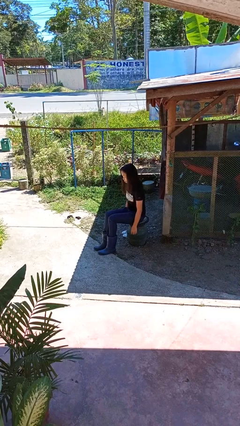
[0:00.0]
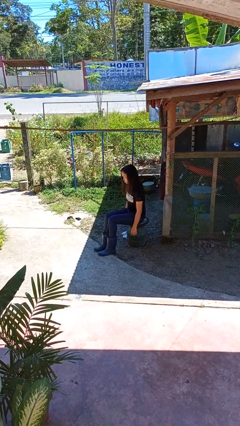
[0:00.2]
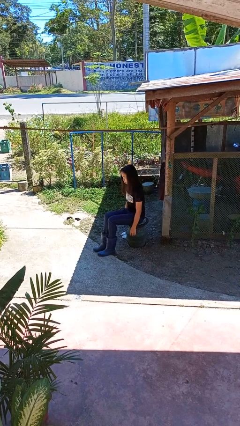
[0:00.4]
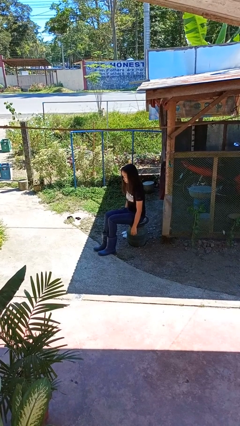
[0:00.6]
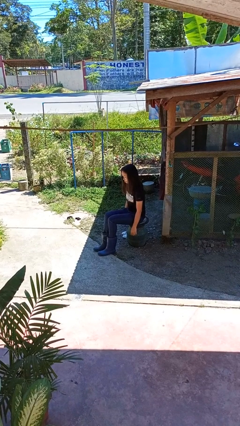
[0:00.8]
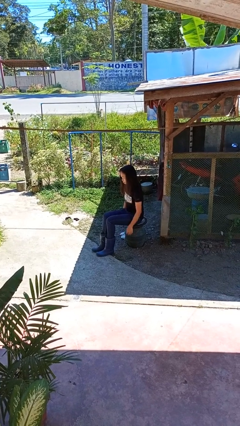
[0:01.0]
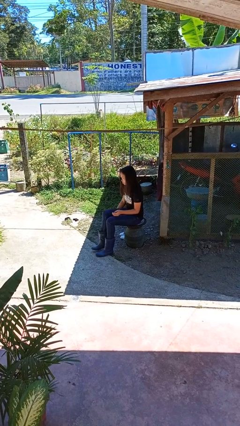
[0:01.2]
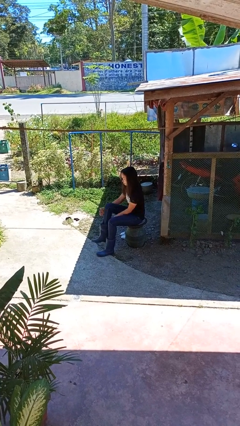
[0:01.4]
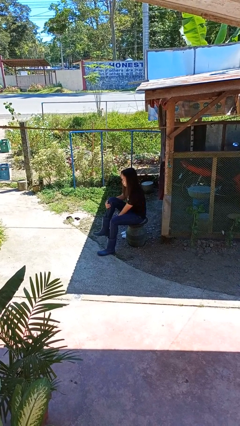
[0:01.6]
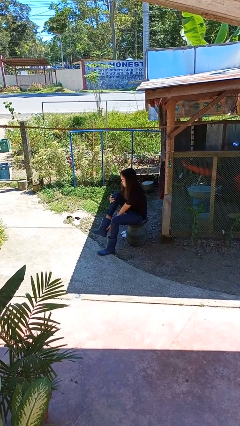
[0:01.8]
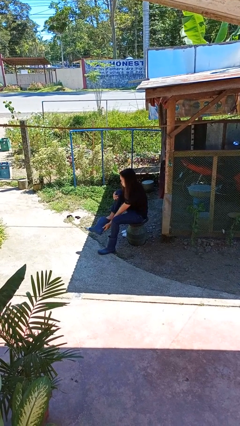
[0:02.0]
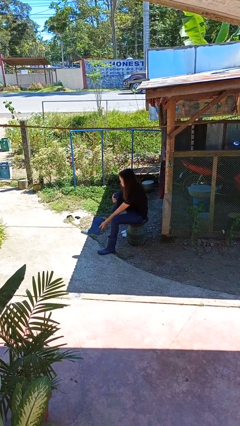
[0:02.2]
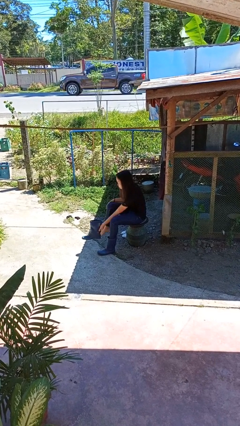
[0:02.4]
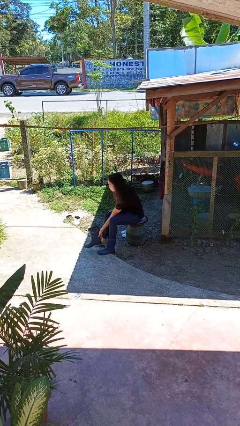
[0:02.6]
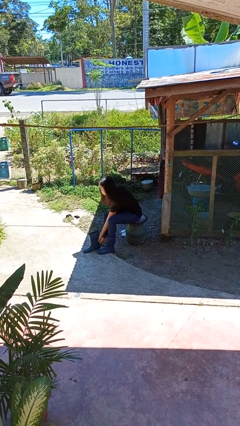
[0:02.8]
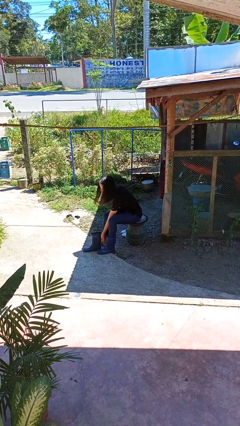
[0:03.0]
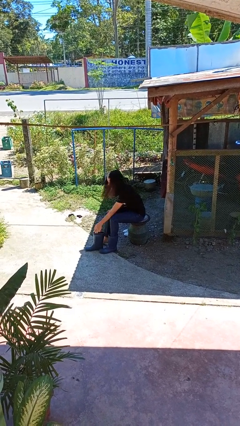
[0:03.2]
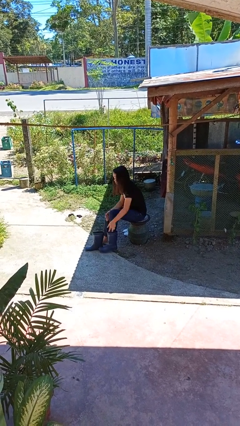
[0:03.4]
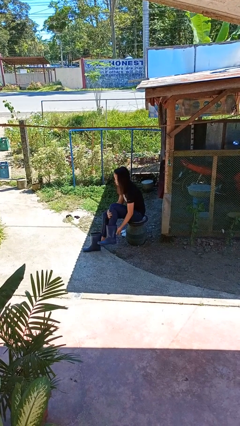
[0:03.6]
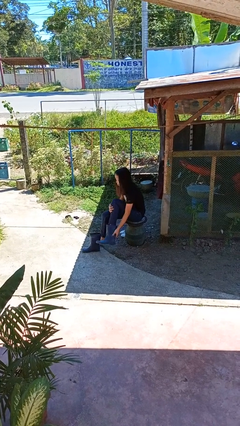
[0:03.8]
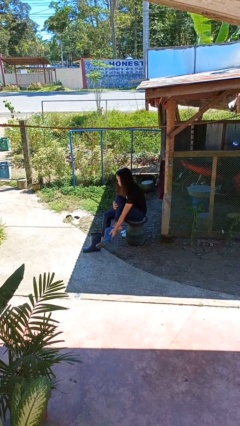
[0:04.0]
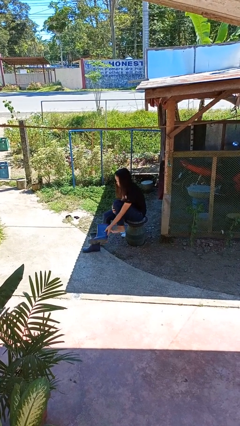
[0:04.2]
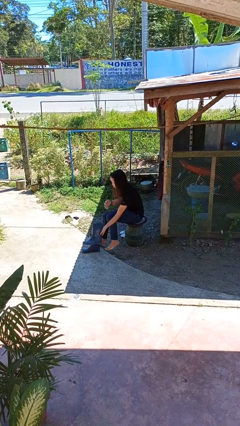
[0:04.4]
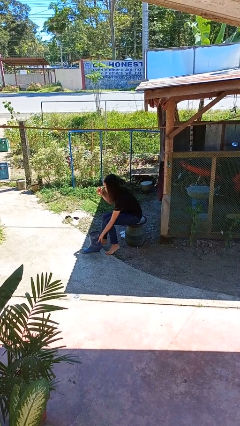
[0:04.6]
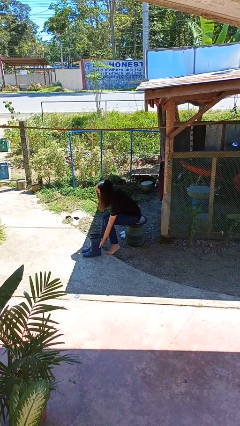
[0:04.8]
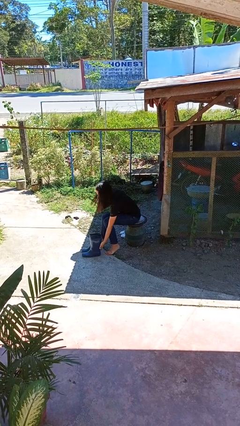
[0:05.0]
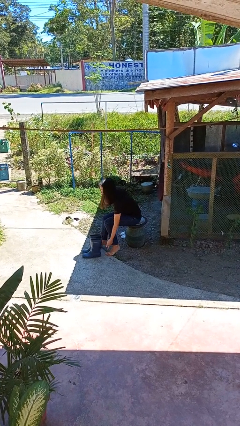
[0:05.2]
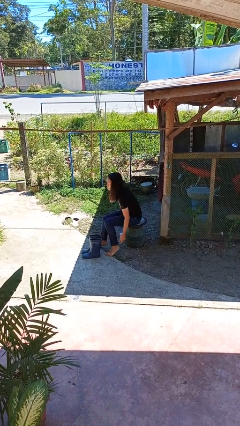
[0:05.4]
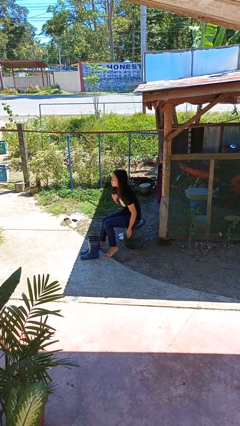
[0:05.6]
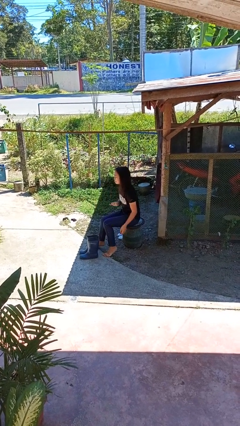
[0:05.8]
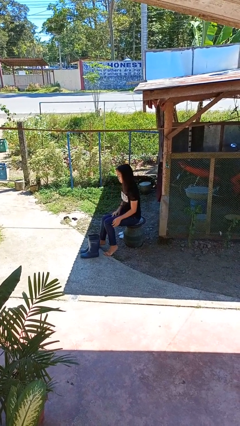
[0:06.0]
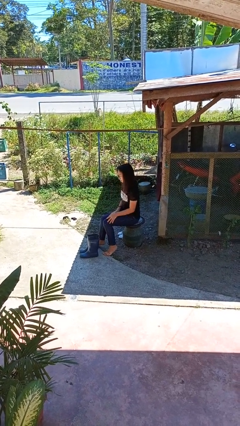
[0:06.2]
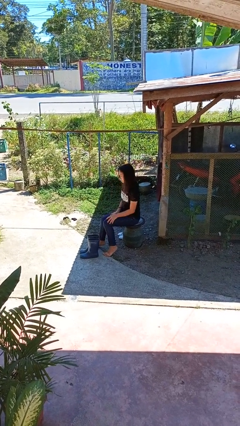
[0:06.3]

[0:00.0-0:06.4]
person takes off boots

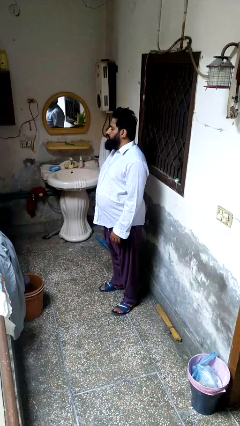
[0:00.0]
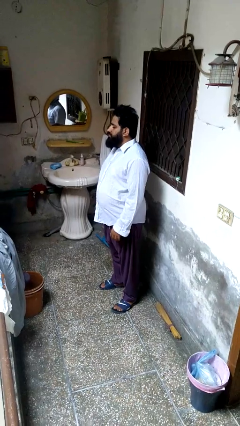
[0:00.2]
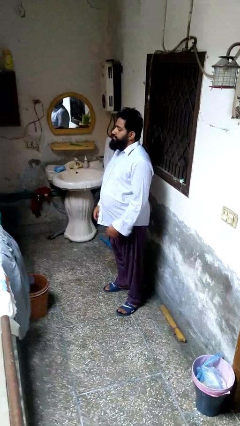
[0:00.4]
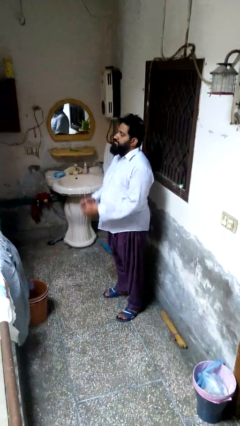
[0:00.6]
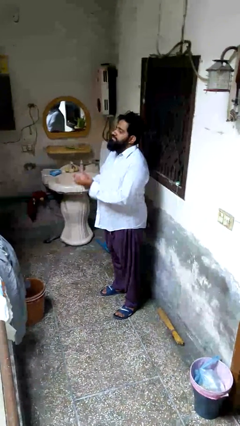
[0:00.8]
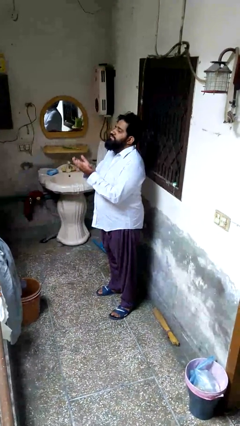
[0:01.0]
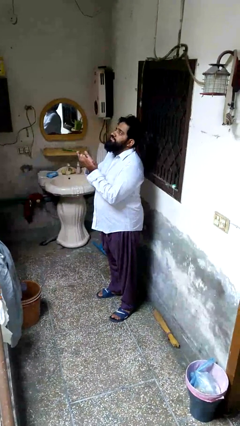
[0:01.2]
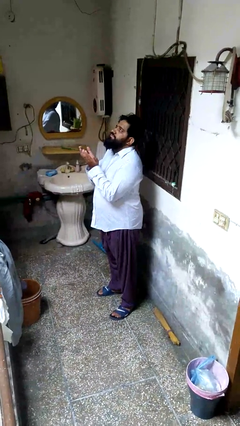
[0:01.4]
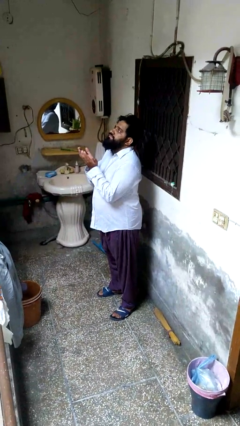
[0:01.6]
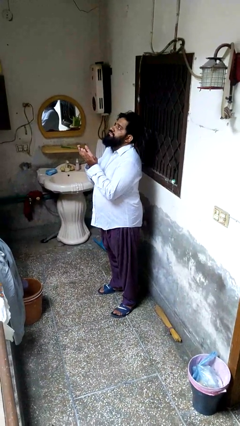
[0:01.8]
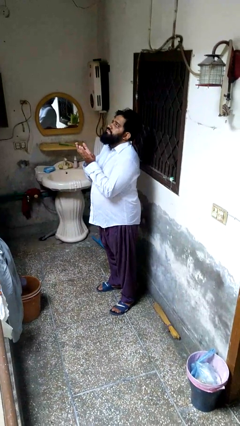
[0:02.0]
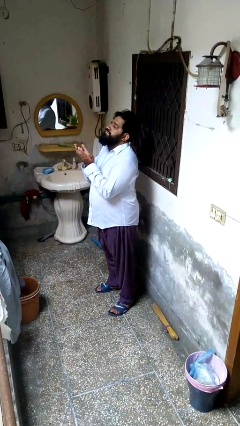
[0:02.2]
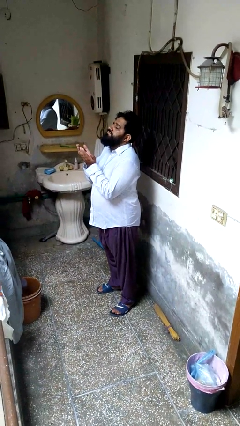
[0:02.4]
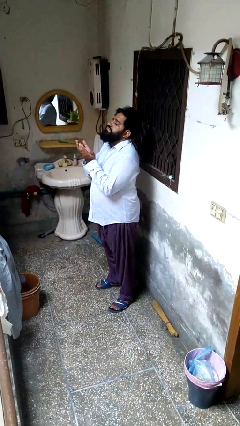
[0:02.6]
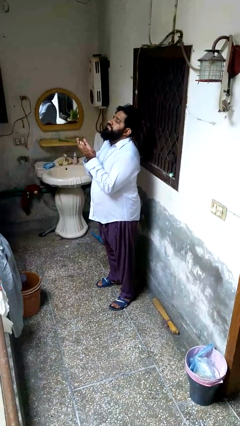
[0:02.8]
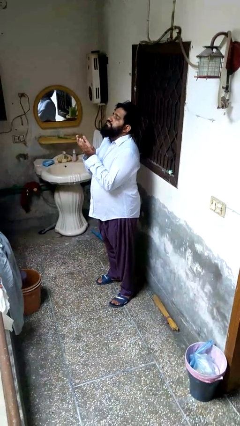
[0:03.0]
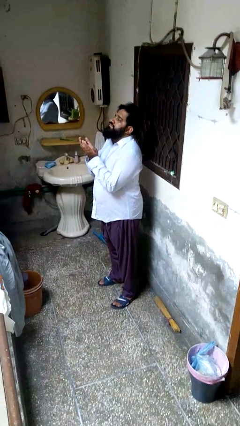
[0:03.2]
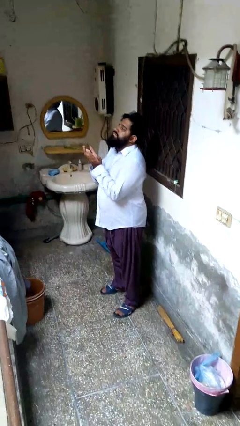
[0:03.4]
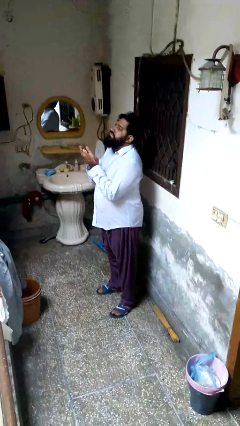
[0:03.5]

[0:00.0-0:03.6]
person prays

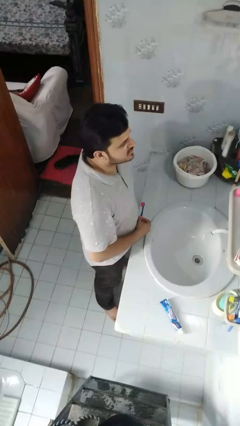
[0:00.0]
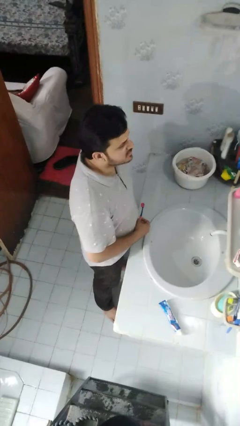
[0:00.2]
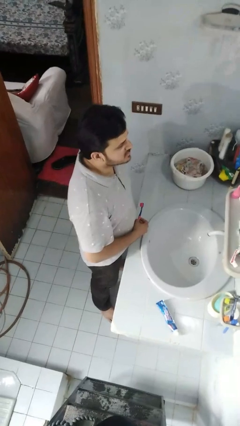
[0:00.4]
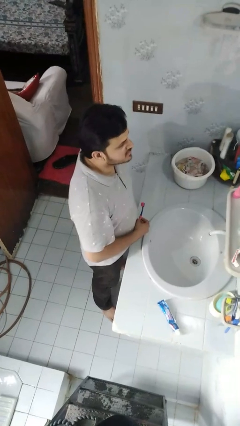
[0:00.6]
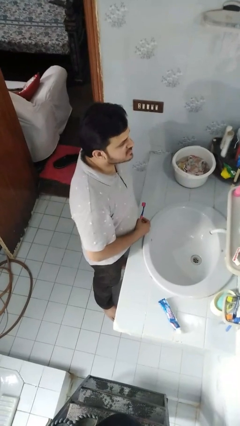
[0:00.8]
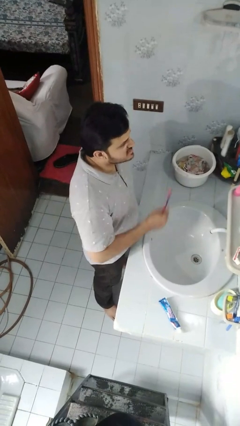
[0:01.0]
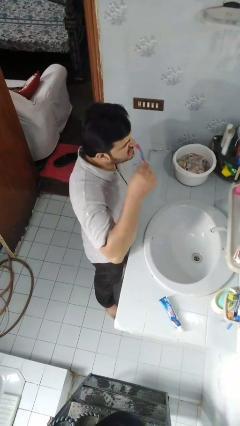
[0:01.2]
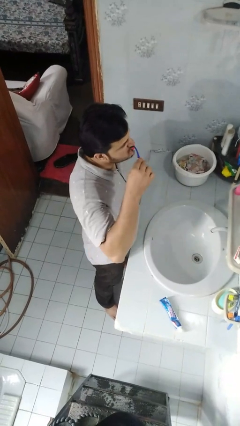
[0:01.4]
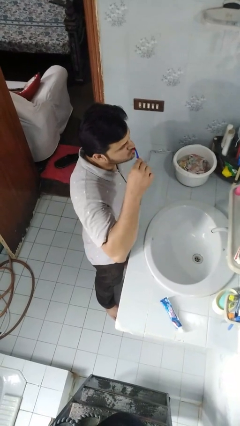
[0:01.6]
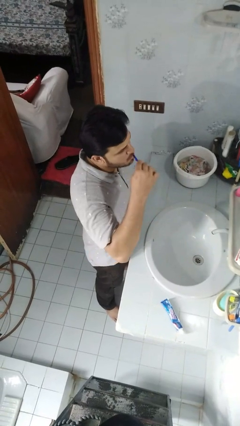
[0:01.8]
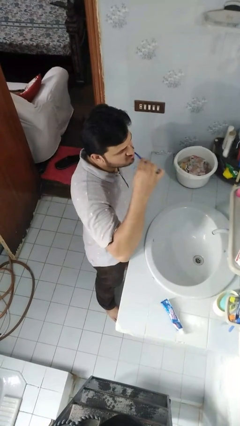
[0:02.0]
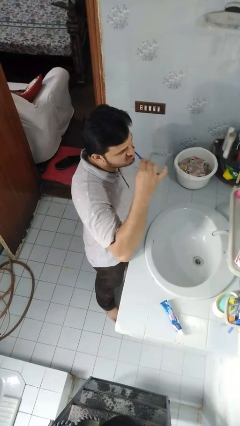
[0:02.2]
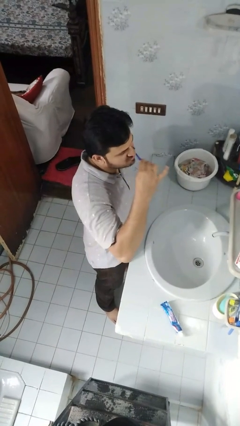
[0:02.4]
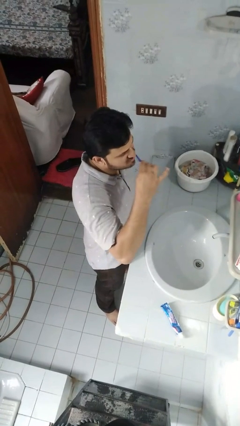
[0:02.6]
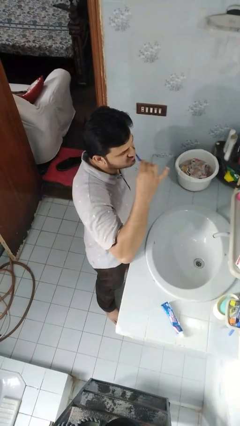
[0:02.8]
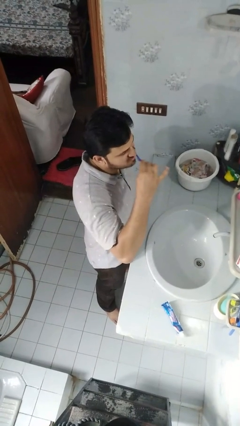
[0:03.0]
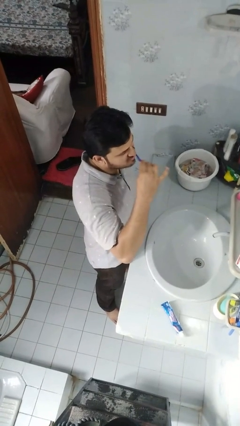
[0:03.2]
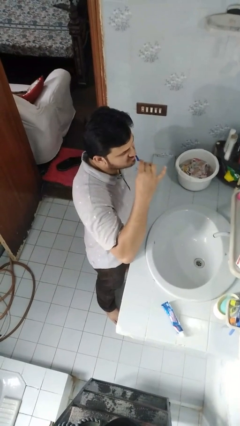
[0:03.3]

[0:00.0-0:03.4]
person brushes teeth

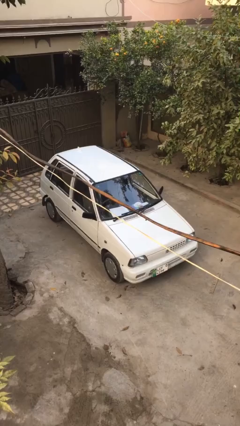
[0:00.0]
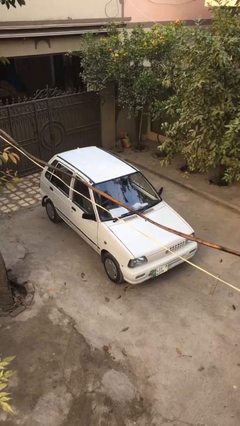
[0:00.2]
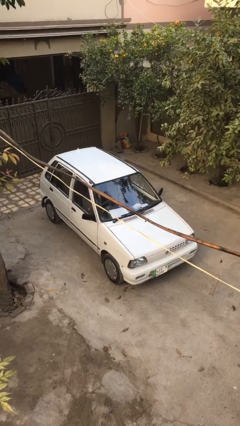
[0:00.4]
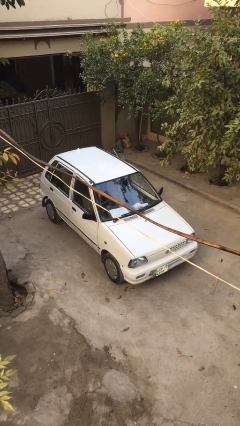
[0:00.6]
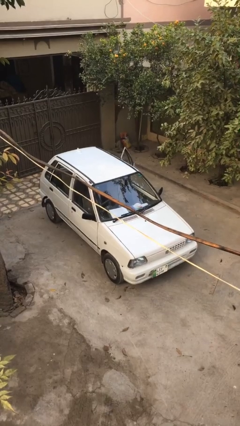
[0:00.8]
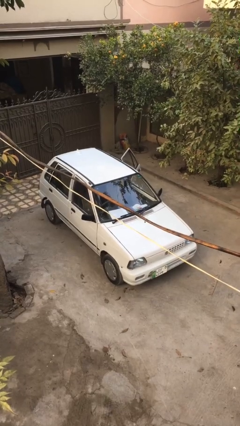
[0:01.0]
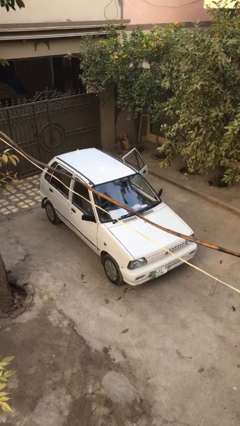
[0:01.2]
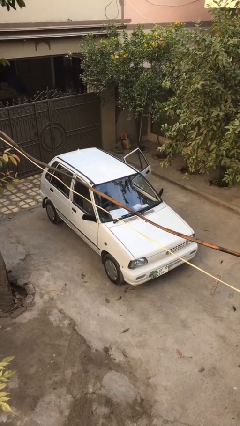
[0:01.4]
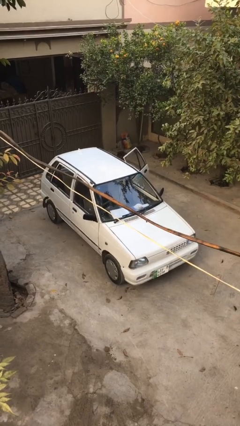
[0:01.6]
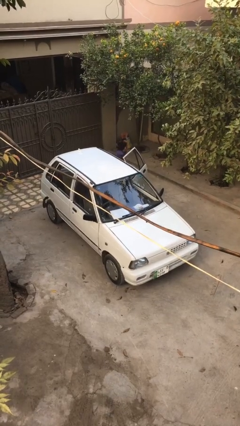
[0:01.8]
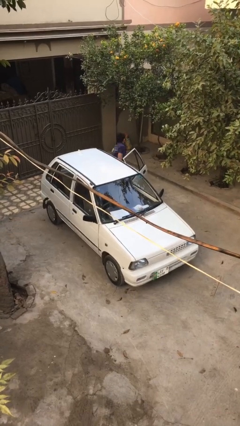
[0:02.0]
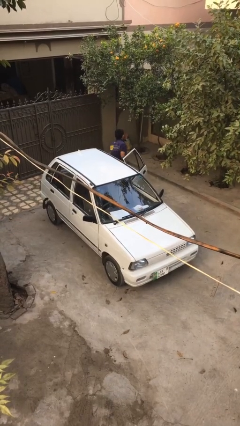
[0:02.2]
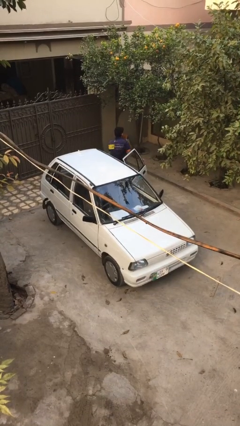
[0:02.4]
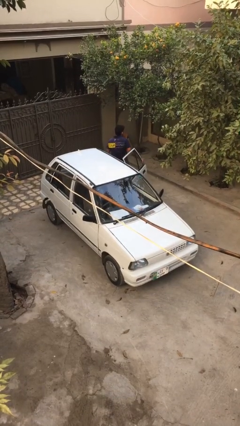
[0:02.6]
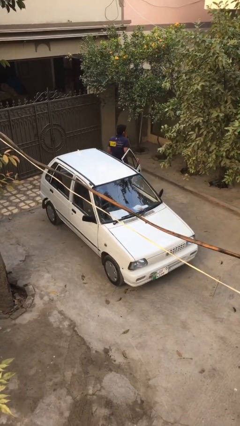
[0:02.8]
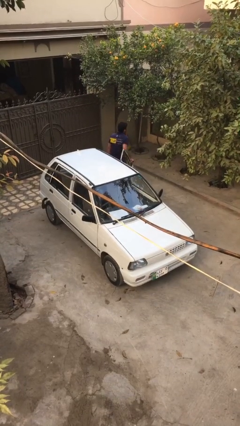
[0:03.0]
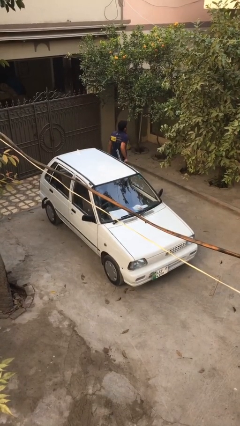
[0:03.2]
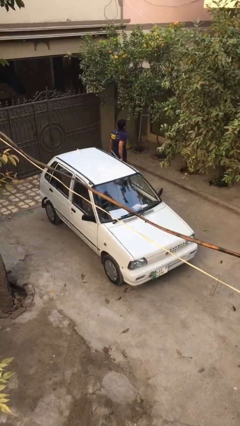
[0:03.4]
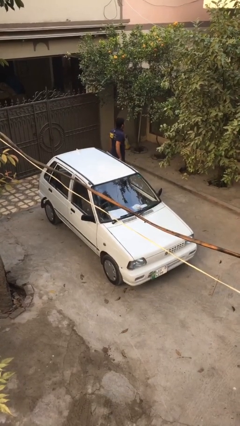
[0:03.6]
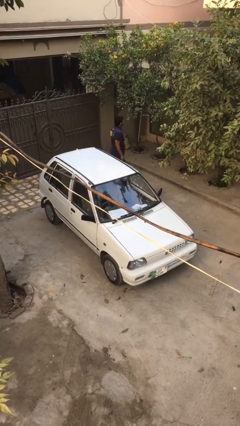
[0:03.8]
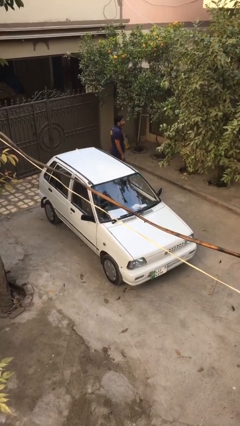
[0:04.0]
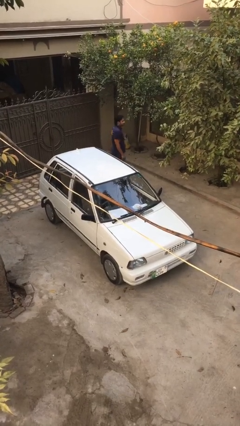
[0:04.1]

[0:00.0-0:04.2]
car drops off person
